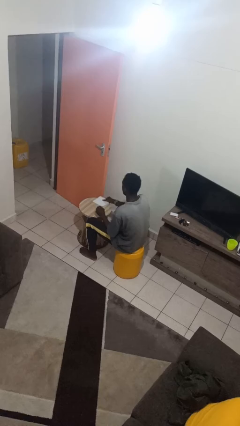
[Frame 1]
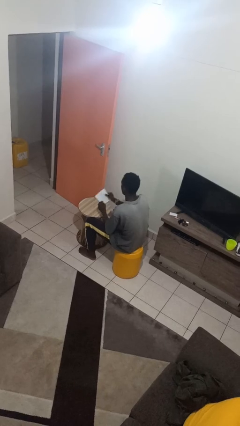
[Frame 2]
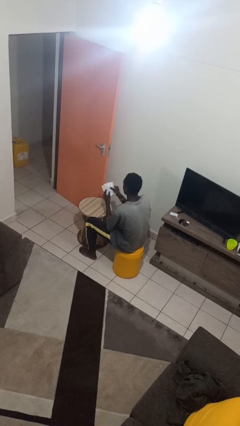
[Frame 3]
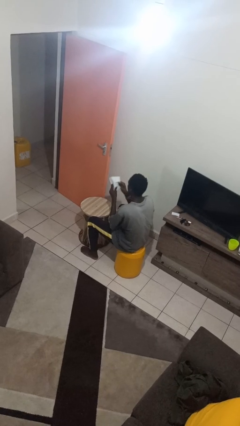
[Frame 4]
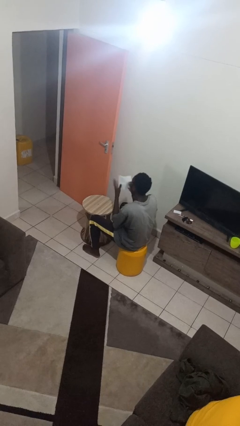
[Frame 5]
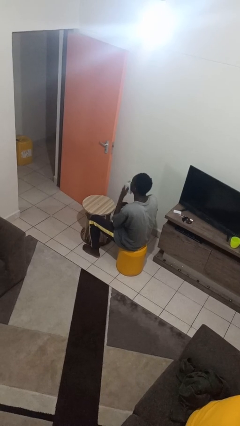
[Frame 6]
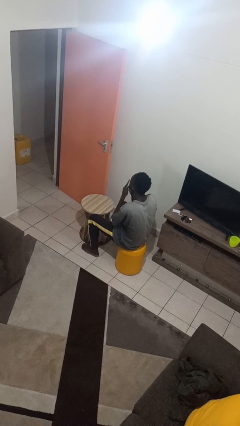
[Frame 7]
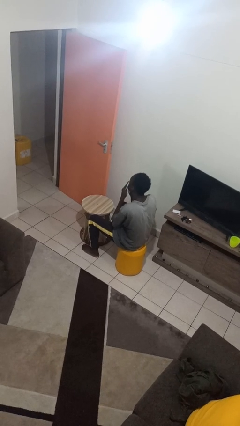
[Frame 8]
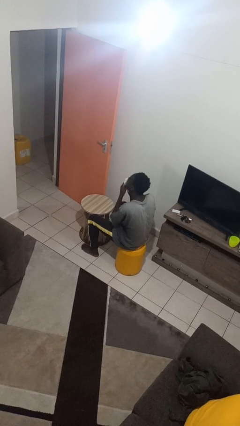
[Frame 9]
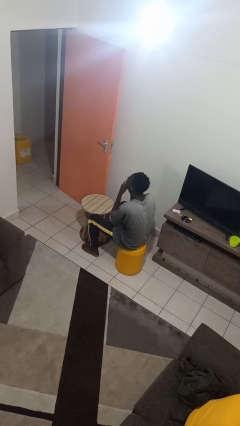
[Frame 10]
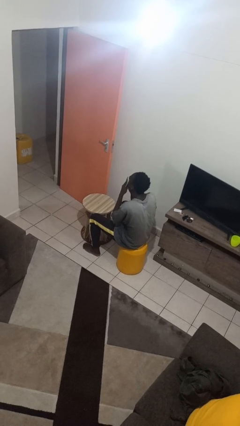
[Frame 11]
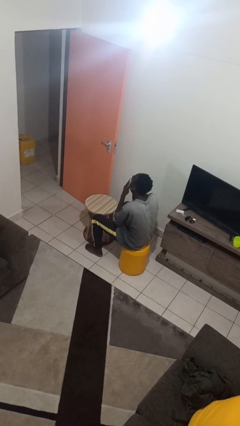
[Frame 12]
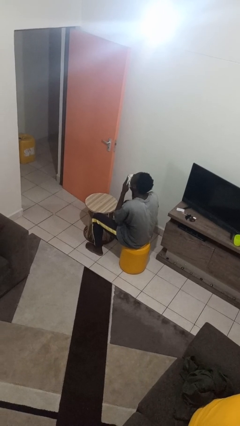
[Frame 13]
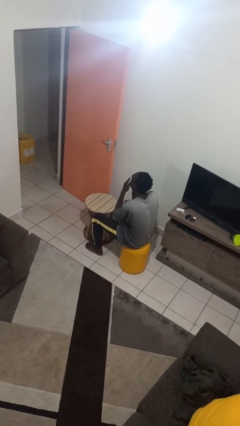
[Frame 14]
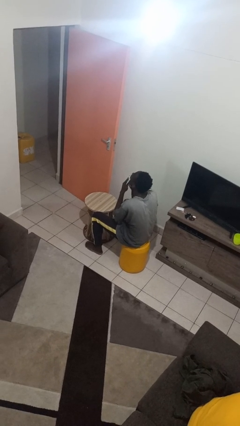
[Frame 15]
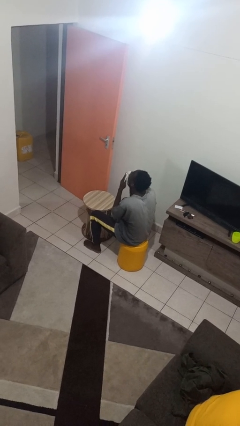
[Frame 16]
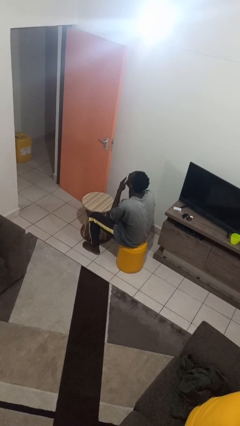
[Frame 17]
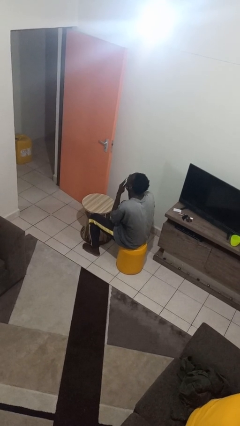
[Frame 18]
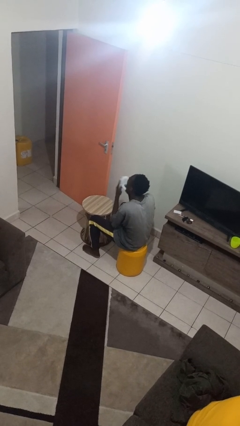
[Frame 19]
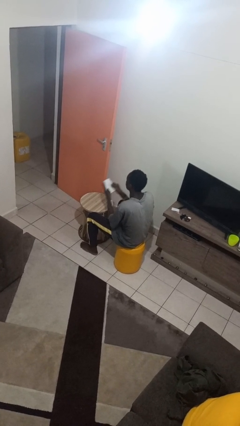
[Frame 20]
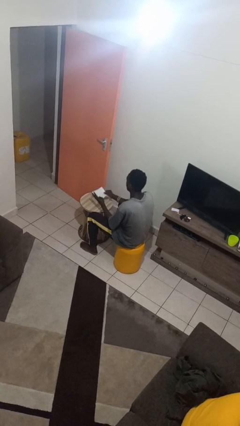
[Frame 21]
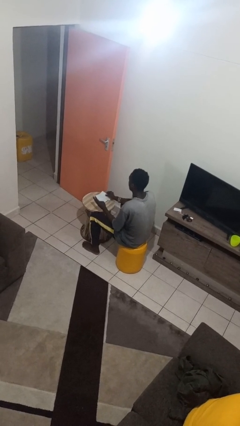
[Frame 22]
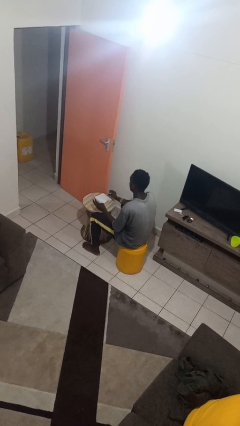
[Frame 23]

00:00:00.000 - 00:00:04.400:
person wipes mouth with napkin

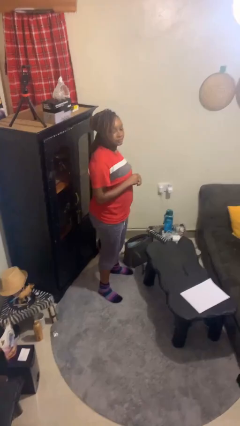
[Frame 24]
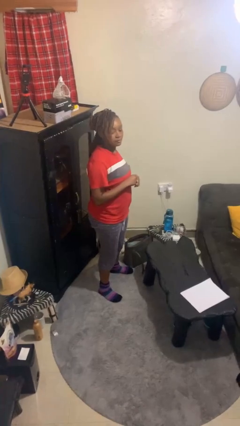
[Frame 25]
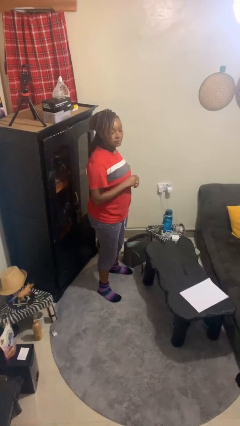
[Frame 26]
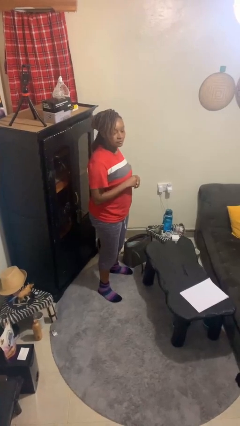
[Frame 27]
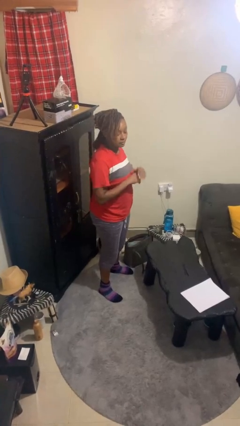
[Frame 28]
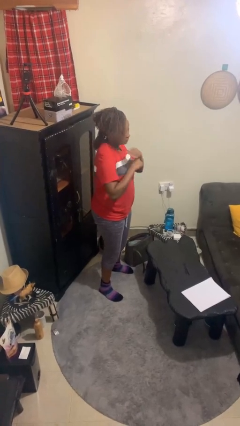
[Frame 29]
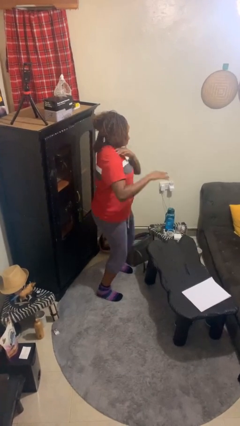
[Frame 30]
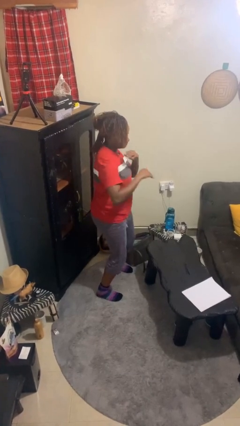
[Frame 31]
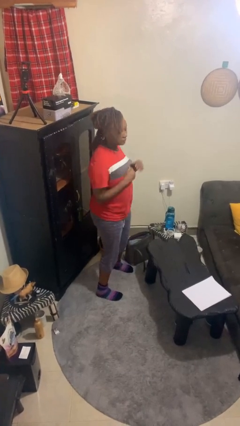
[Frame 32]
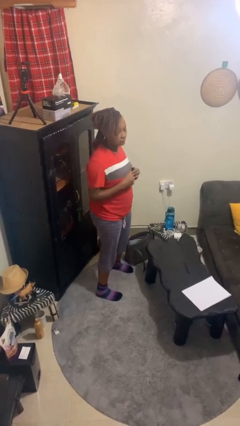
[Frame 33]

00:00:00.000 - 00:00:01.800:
person karate chop

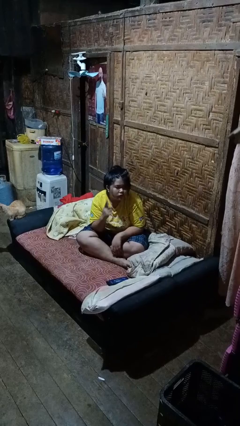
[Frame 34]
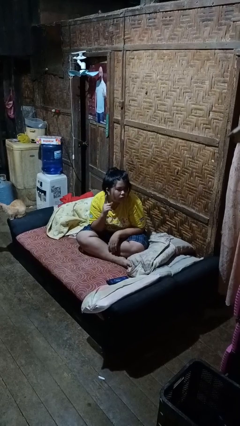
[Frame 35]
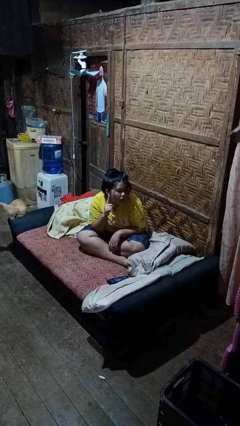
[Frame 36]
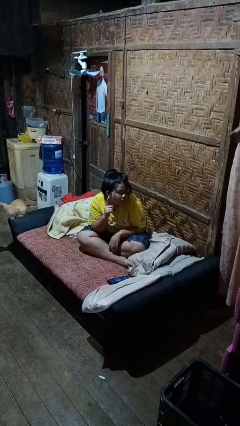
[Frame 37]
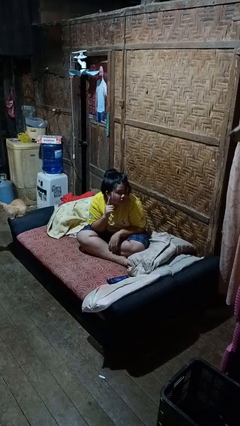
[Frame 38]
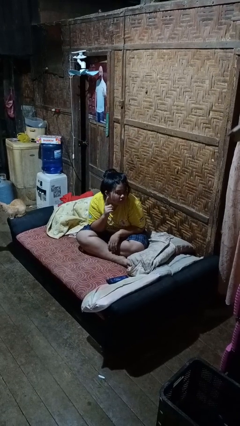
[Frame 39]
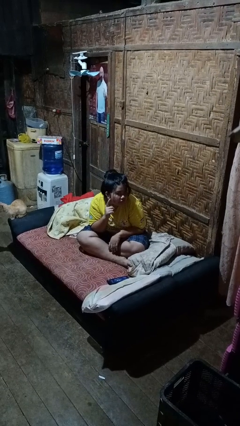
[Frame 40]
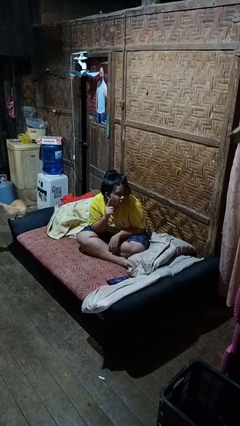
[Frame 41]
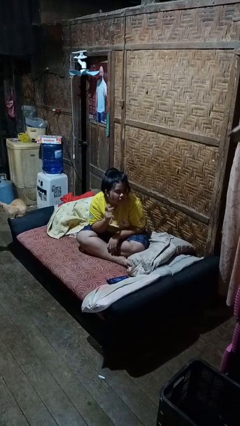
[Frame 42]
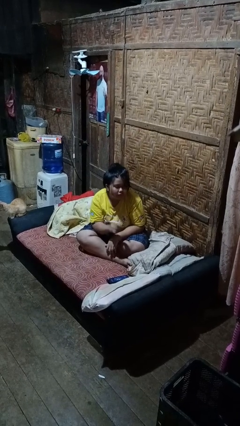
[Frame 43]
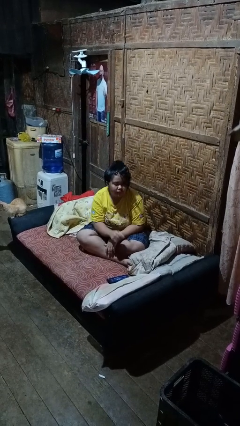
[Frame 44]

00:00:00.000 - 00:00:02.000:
person gestures listen closely

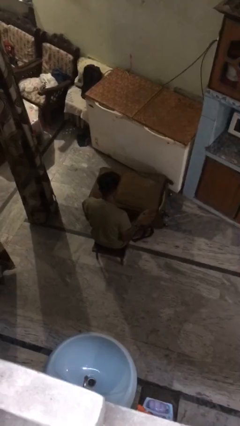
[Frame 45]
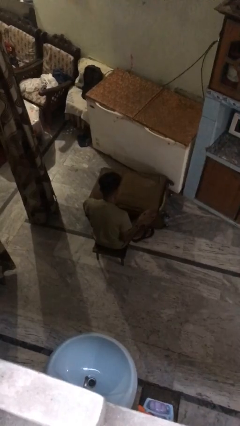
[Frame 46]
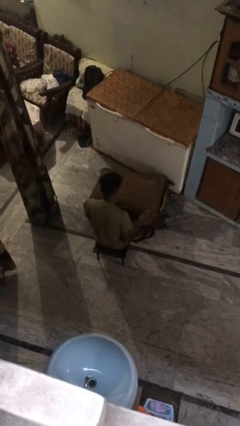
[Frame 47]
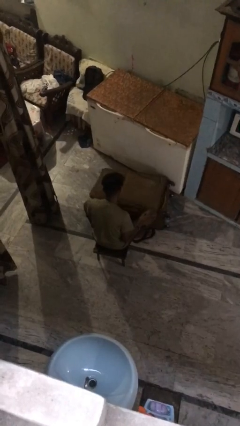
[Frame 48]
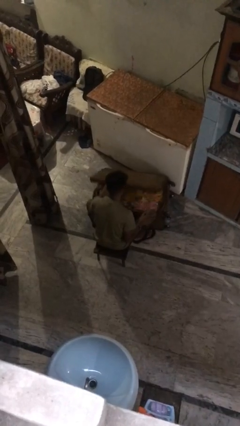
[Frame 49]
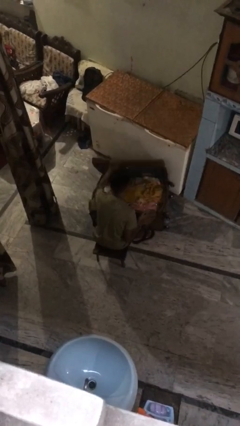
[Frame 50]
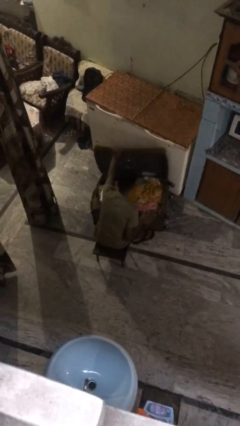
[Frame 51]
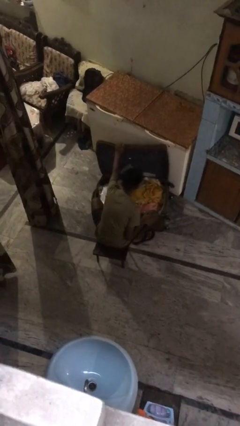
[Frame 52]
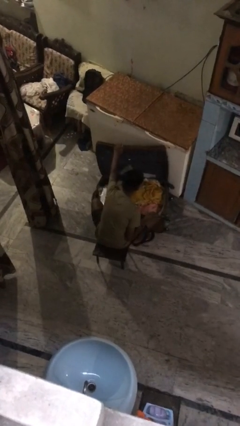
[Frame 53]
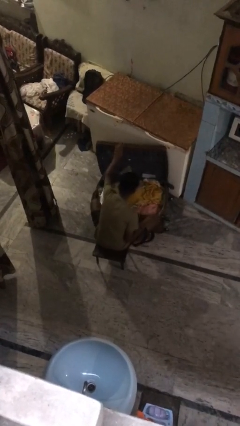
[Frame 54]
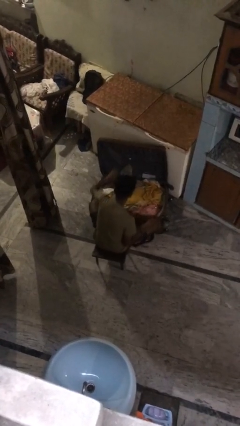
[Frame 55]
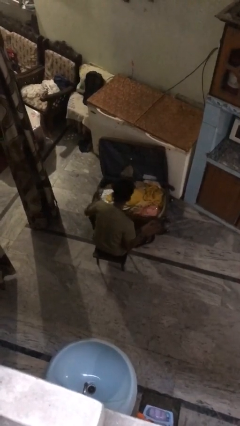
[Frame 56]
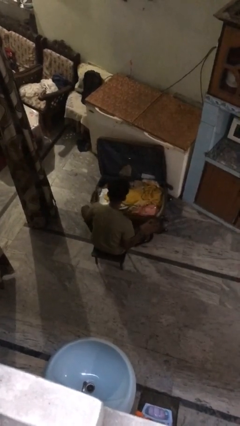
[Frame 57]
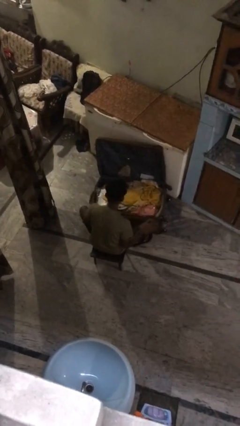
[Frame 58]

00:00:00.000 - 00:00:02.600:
person opens suitcase

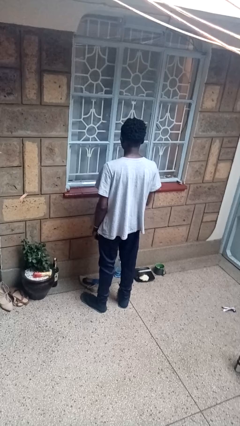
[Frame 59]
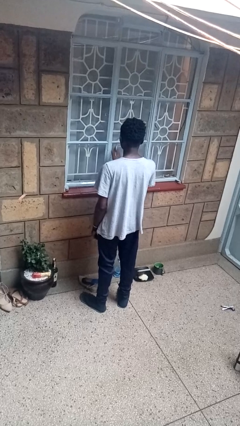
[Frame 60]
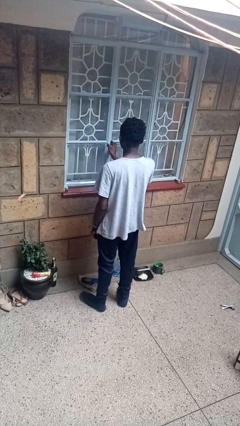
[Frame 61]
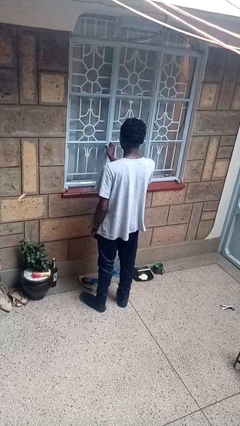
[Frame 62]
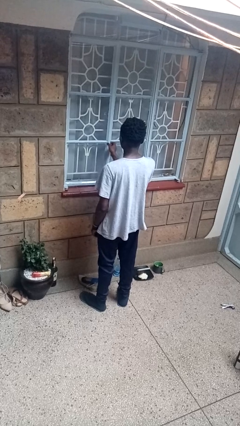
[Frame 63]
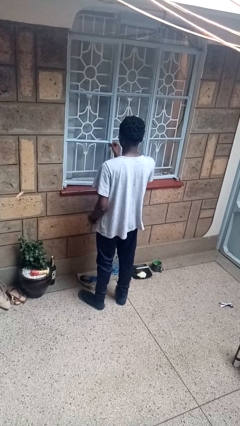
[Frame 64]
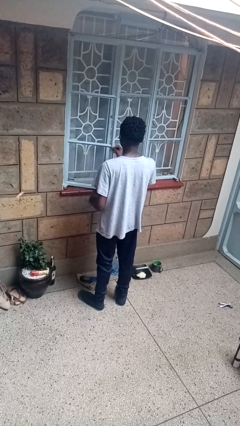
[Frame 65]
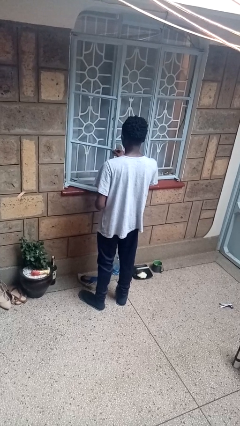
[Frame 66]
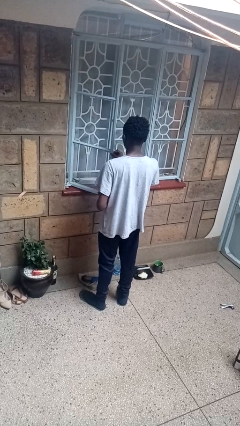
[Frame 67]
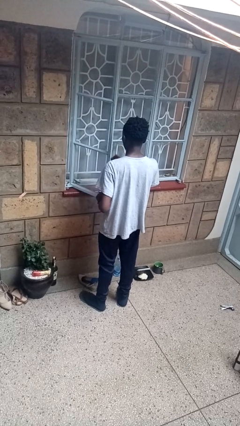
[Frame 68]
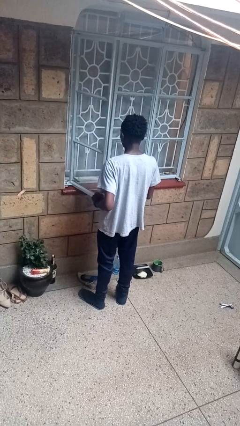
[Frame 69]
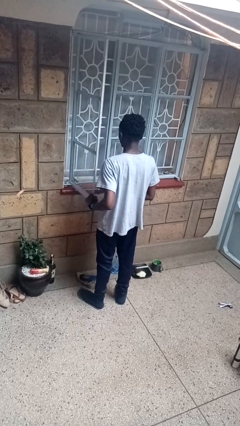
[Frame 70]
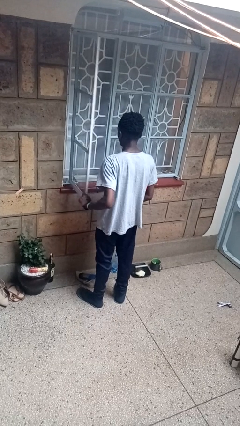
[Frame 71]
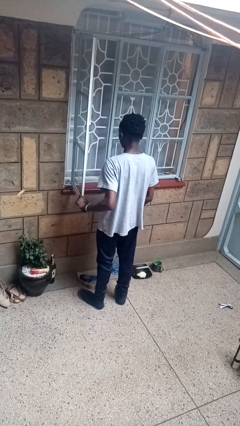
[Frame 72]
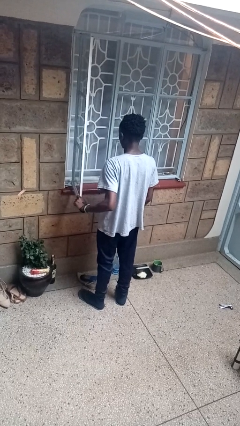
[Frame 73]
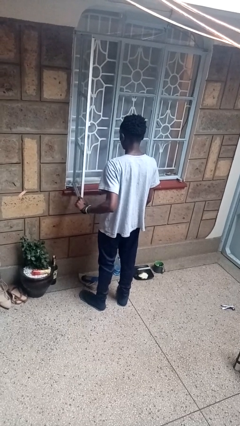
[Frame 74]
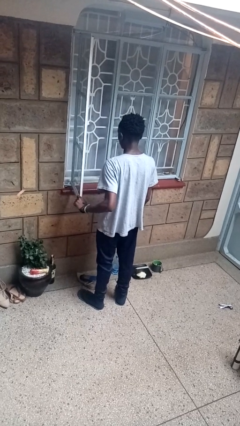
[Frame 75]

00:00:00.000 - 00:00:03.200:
person opens home window

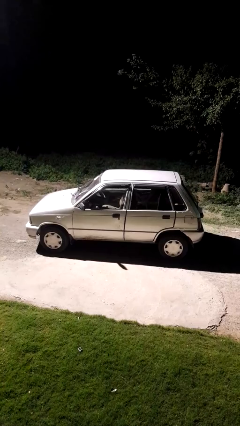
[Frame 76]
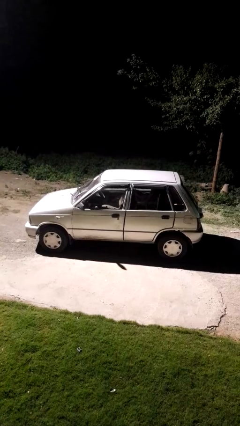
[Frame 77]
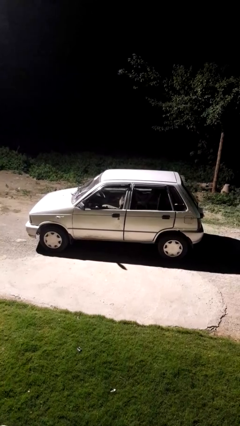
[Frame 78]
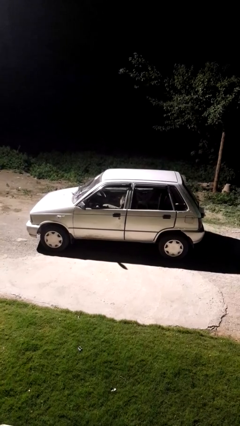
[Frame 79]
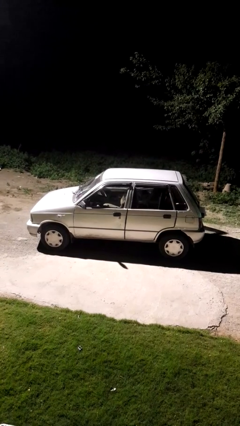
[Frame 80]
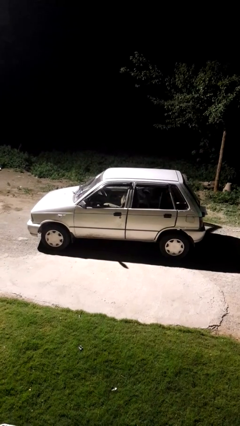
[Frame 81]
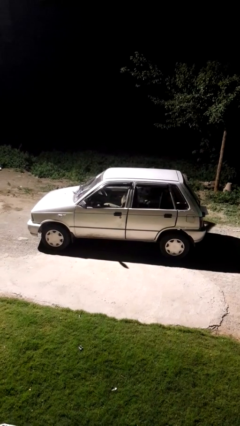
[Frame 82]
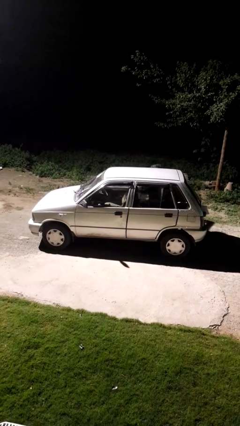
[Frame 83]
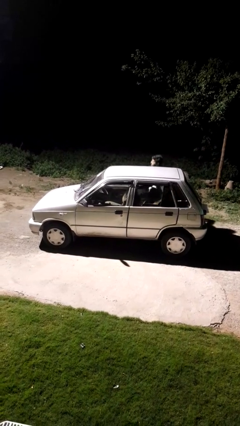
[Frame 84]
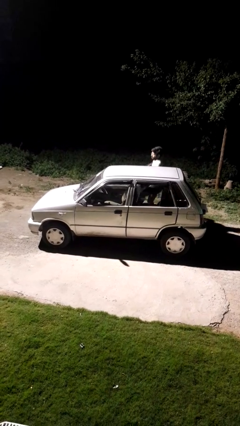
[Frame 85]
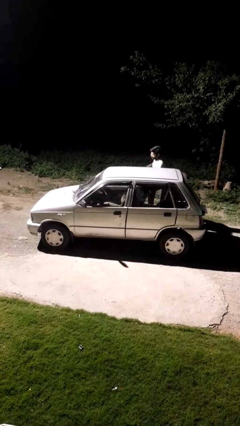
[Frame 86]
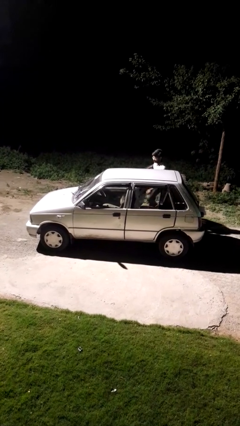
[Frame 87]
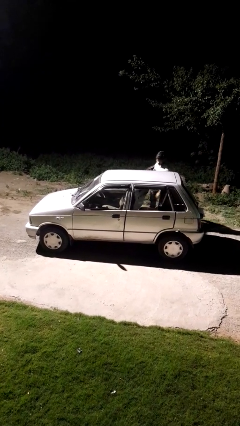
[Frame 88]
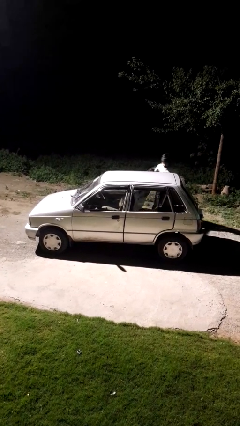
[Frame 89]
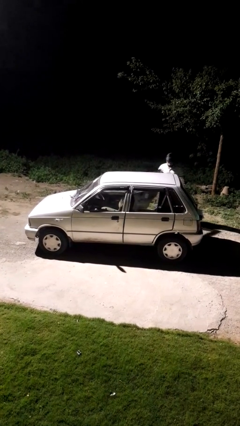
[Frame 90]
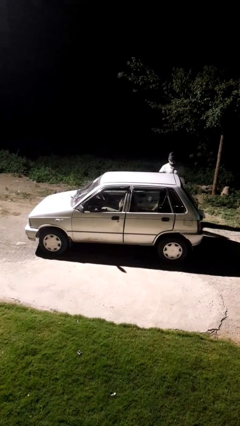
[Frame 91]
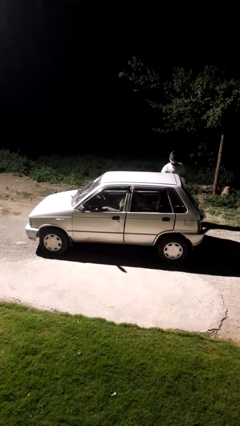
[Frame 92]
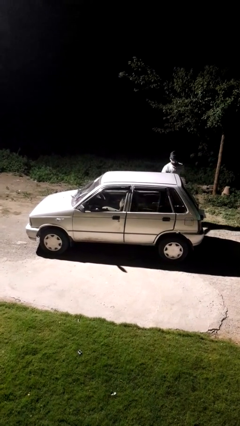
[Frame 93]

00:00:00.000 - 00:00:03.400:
car drops off person
